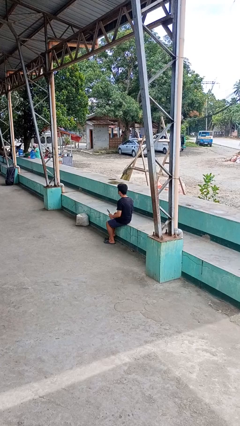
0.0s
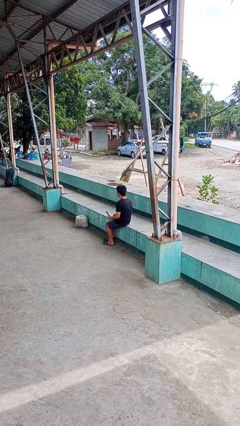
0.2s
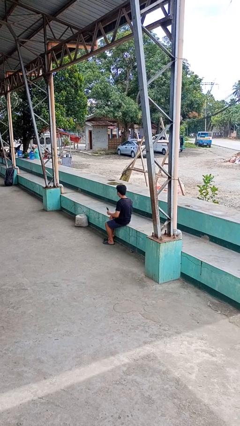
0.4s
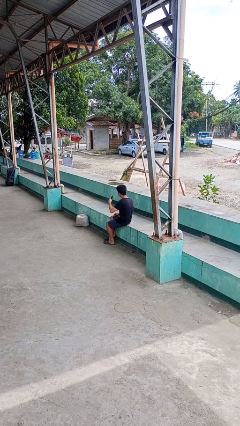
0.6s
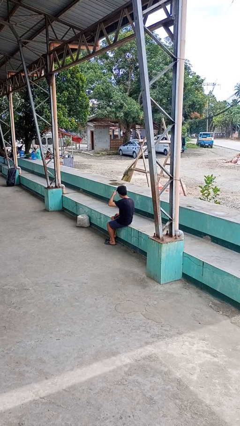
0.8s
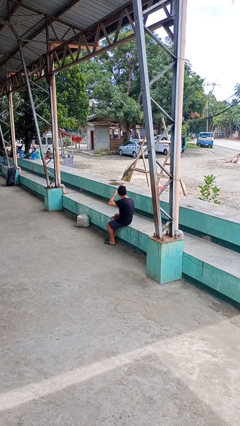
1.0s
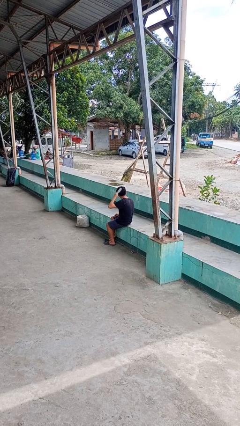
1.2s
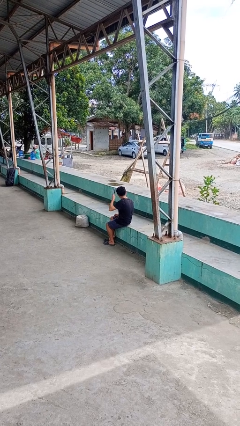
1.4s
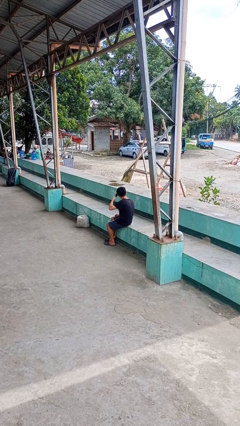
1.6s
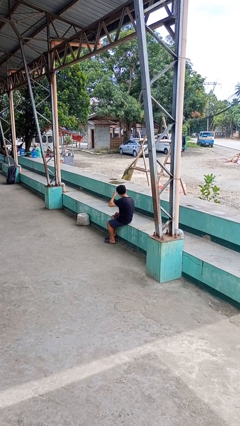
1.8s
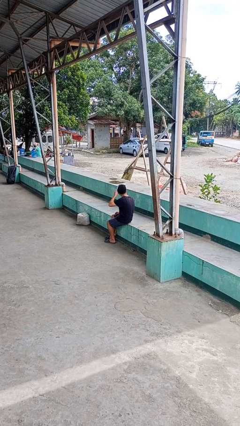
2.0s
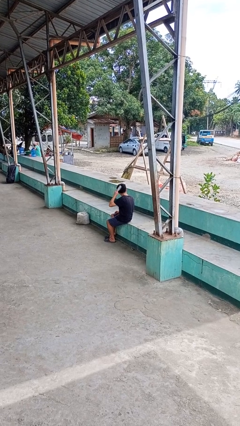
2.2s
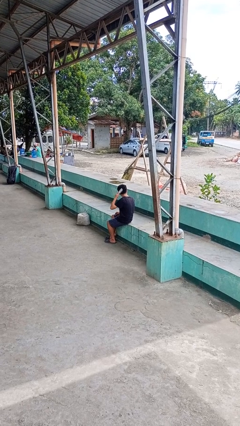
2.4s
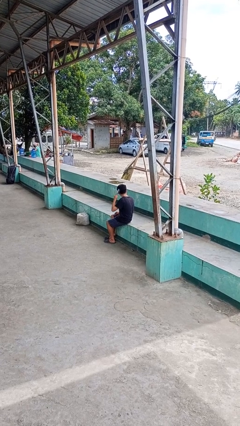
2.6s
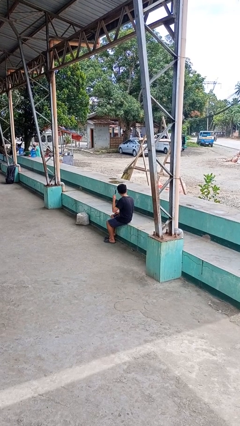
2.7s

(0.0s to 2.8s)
person brushes hair

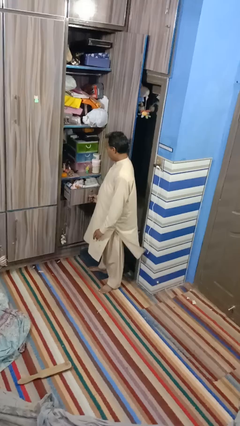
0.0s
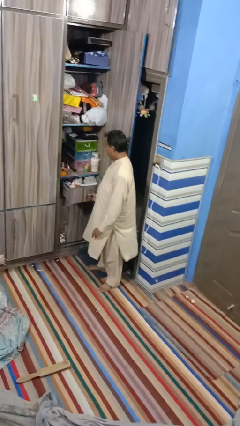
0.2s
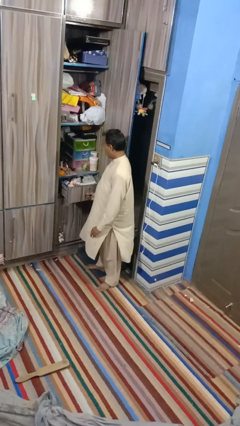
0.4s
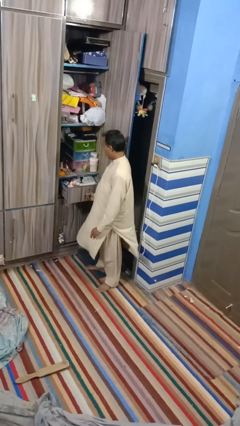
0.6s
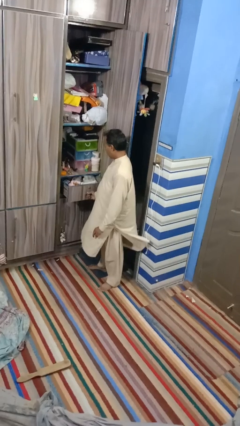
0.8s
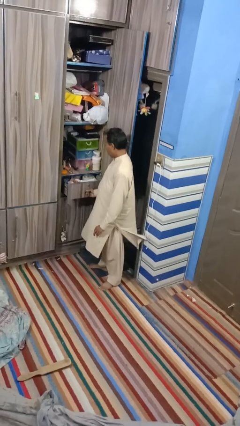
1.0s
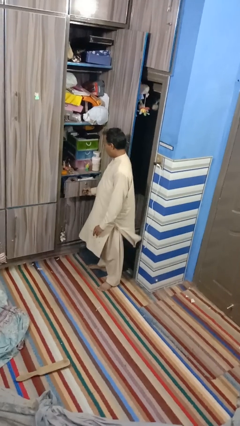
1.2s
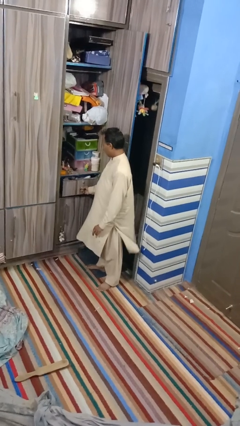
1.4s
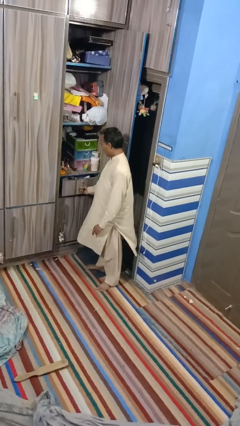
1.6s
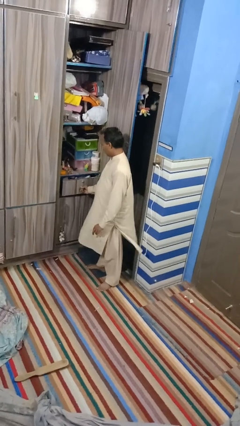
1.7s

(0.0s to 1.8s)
person closes dresser drawer

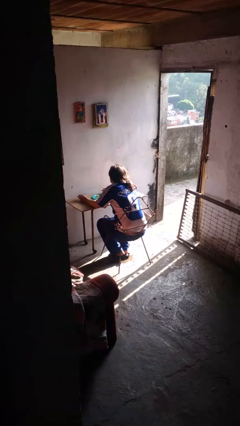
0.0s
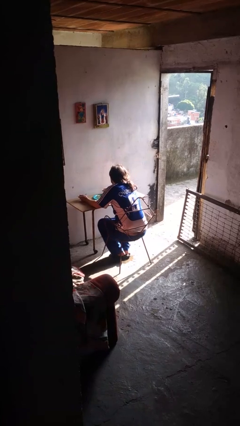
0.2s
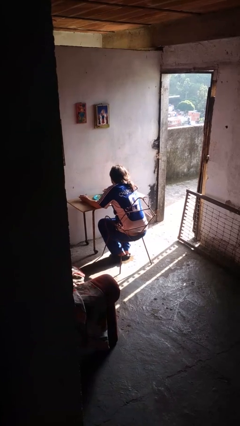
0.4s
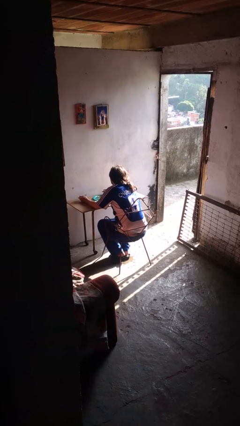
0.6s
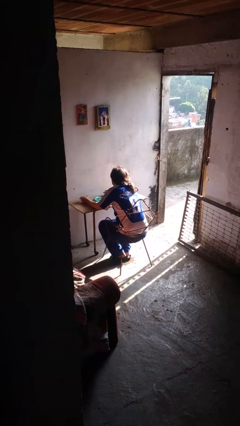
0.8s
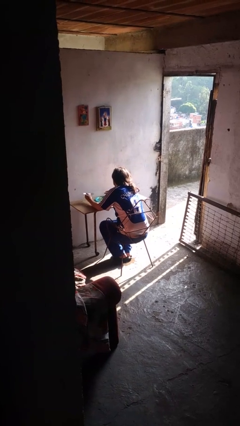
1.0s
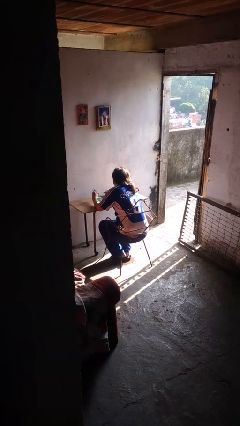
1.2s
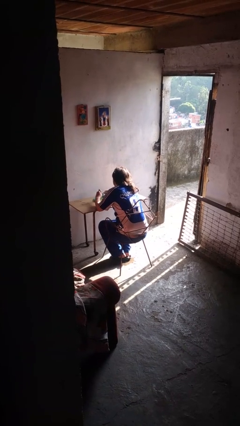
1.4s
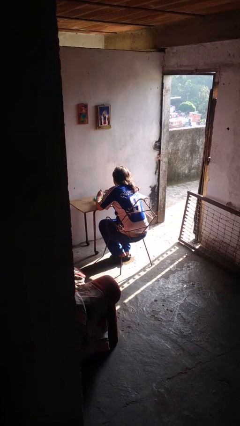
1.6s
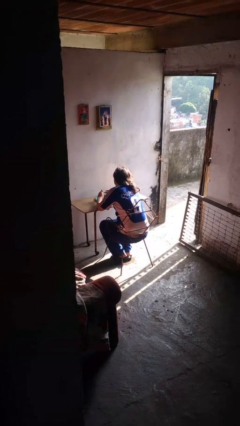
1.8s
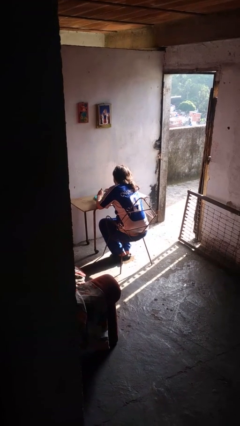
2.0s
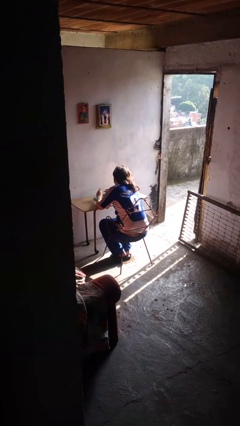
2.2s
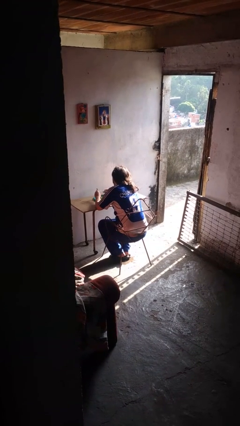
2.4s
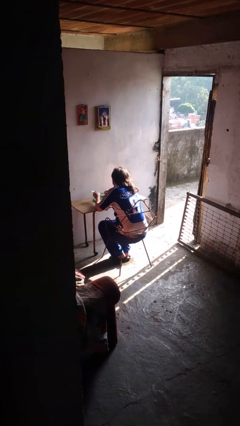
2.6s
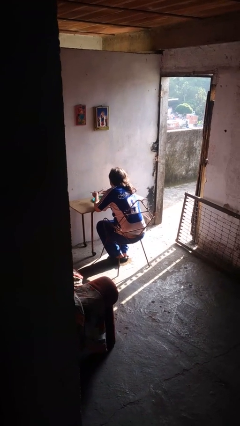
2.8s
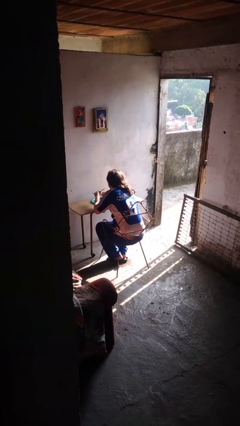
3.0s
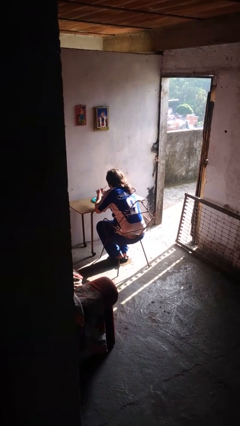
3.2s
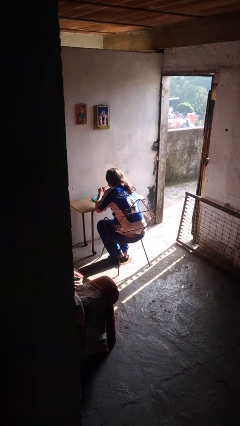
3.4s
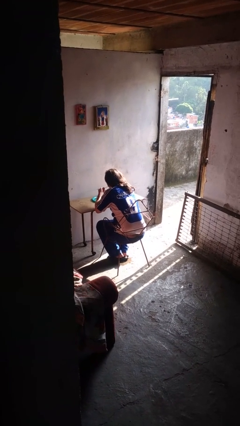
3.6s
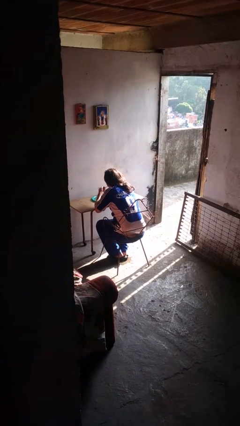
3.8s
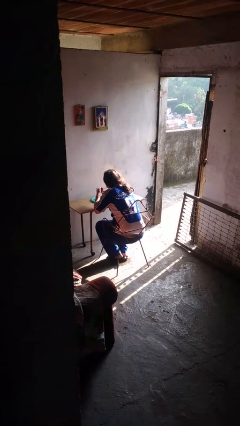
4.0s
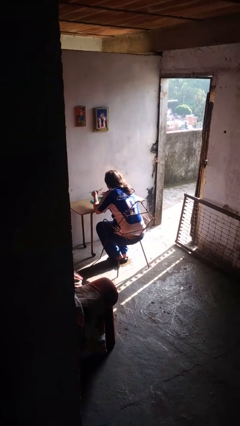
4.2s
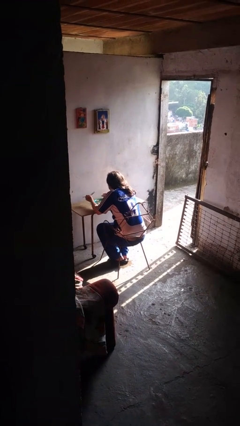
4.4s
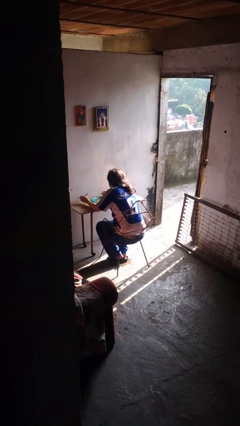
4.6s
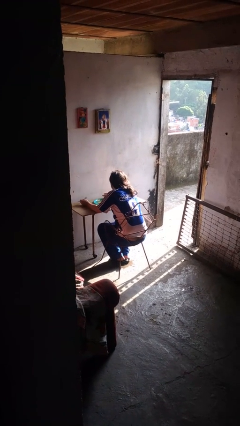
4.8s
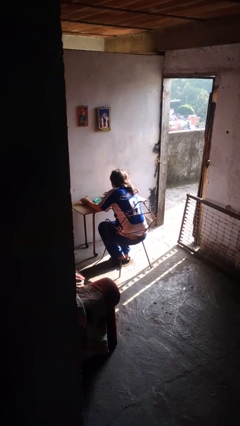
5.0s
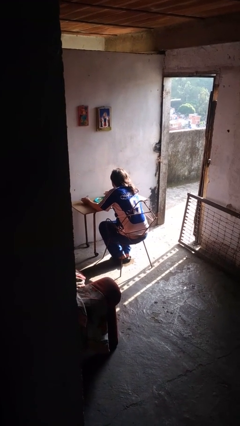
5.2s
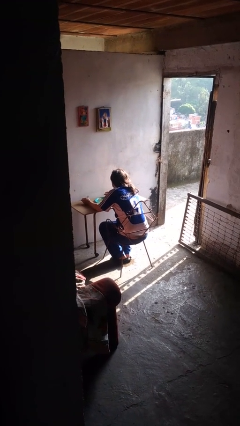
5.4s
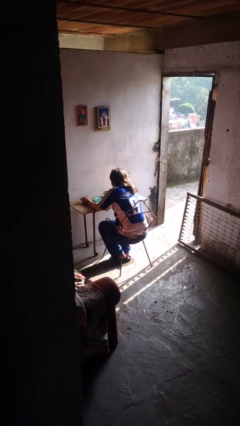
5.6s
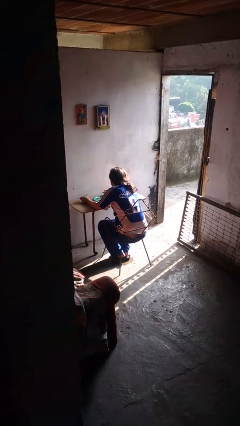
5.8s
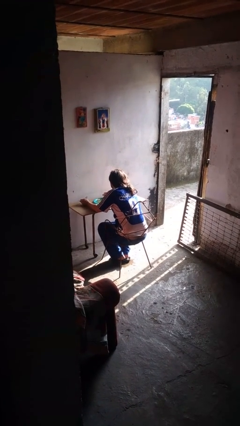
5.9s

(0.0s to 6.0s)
person eats with utensil

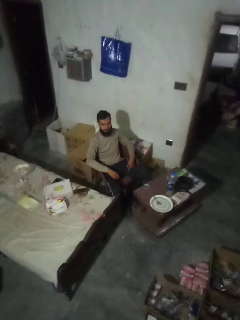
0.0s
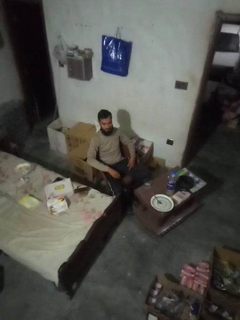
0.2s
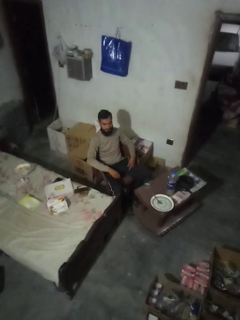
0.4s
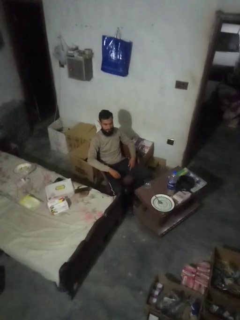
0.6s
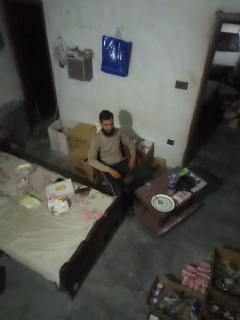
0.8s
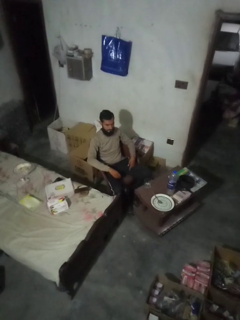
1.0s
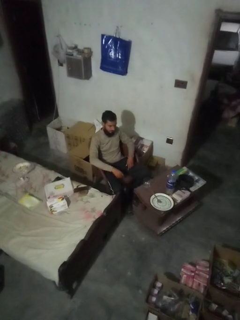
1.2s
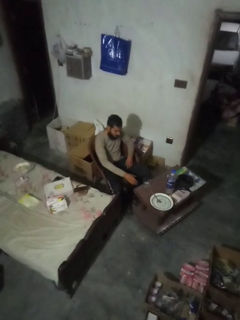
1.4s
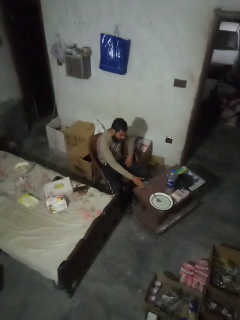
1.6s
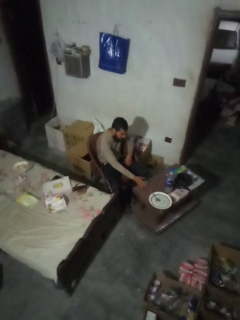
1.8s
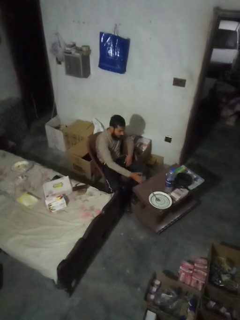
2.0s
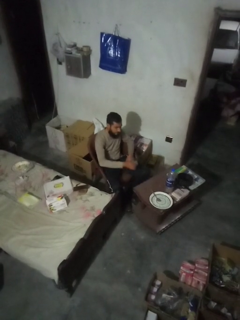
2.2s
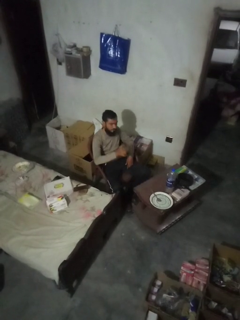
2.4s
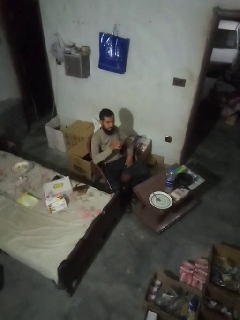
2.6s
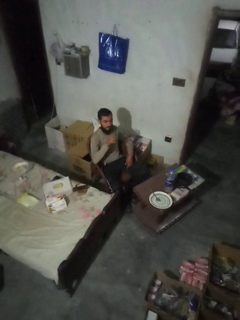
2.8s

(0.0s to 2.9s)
person picks up object from table

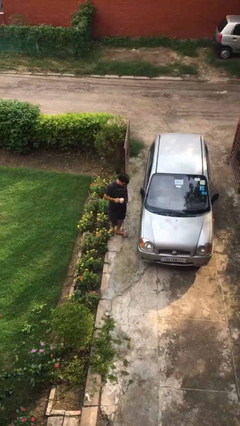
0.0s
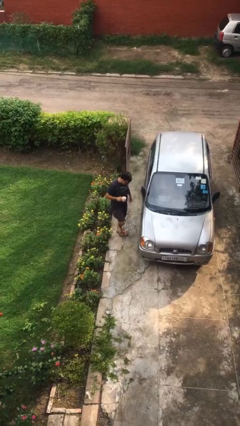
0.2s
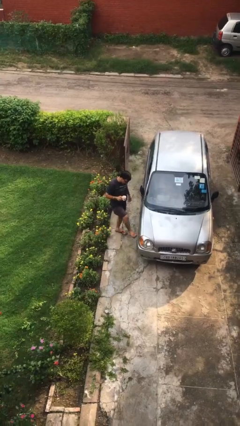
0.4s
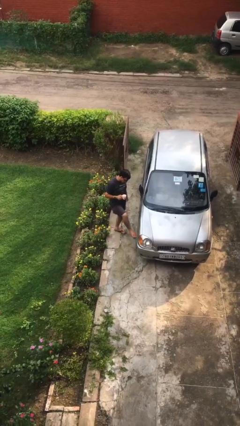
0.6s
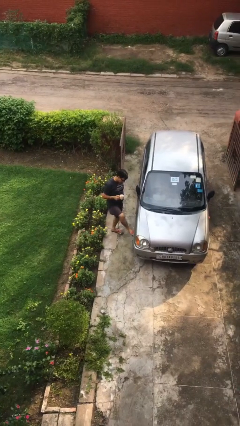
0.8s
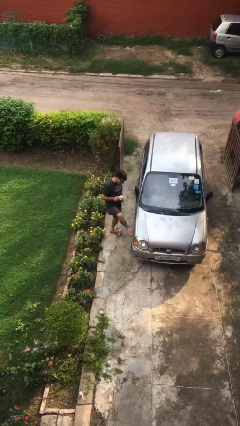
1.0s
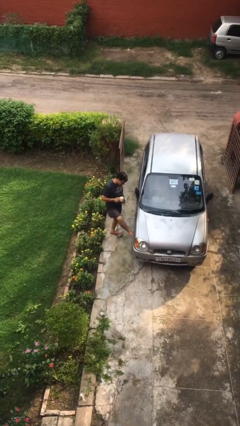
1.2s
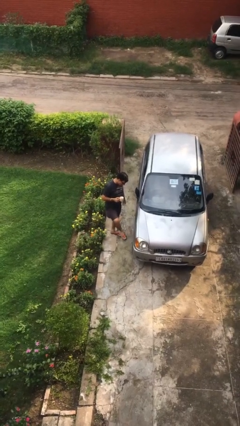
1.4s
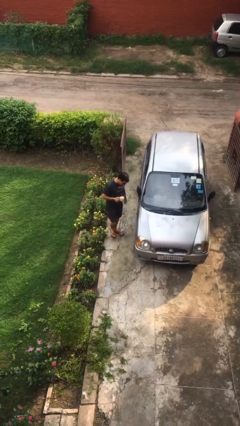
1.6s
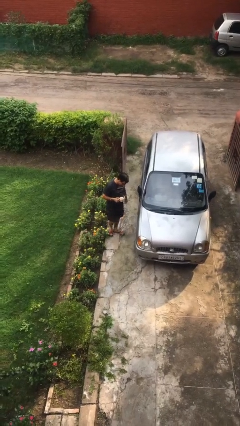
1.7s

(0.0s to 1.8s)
person kicks car tires

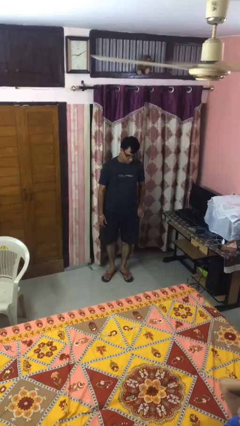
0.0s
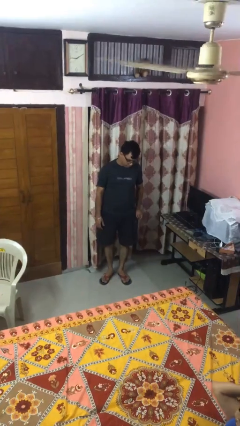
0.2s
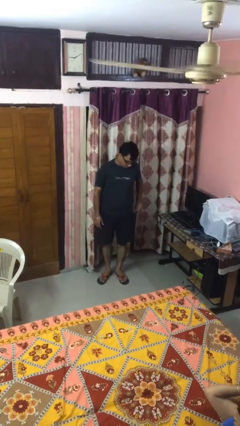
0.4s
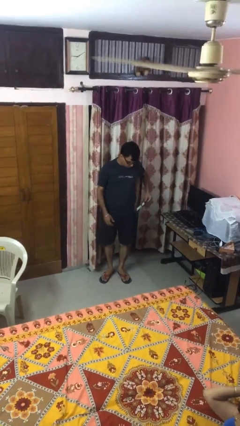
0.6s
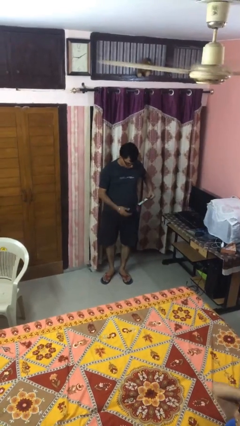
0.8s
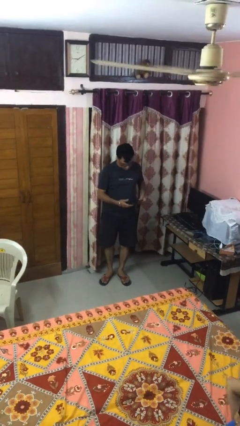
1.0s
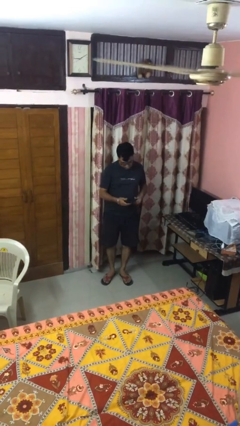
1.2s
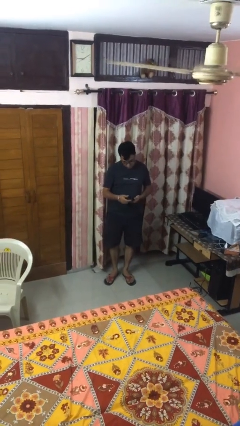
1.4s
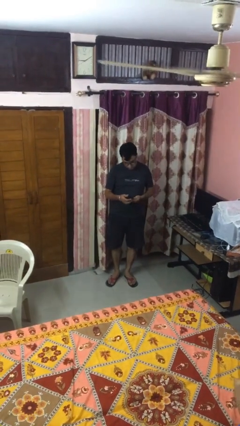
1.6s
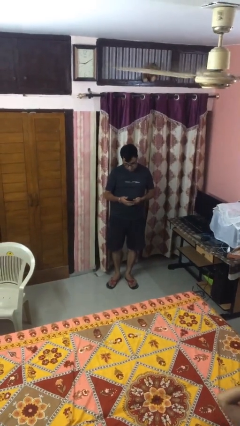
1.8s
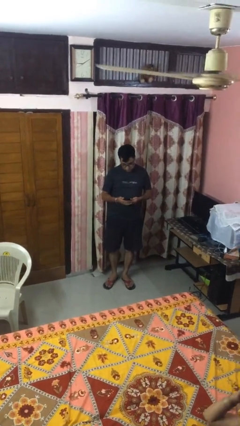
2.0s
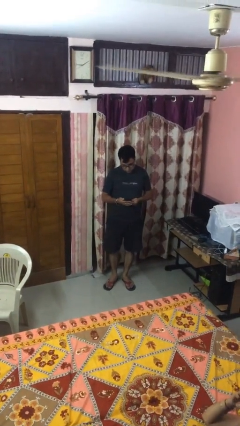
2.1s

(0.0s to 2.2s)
person takes phone from pocket

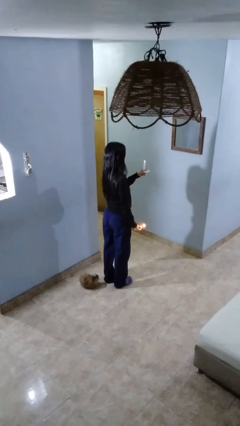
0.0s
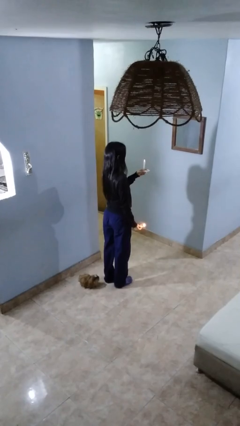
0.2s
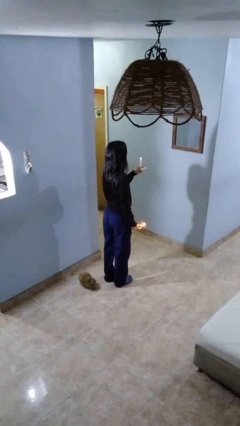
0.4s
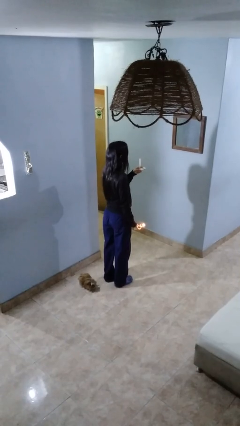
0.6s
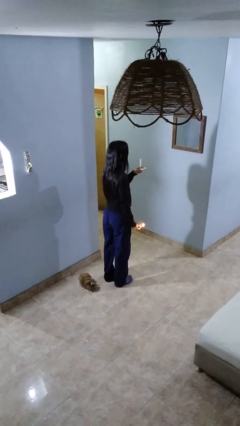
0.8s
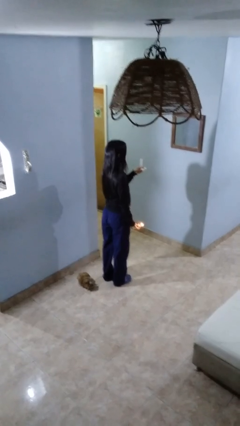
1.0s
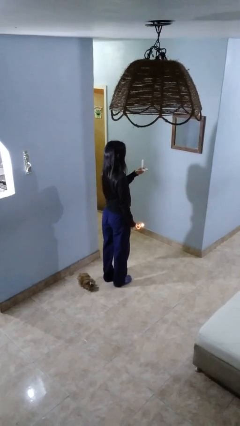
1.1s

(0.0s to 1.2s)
person extinguishes candle
